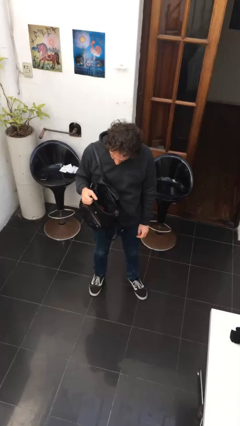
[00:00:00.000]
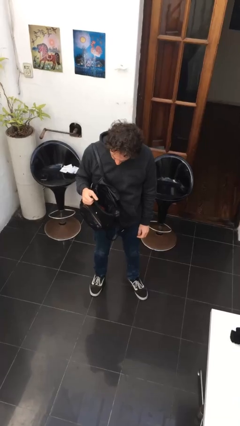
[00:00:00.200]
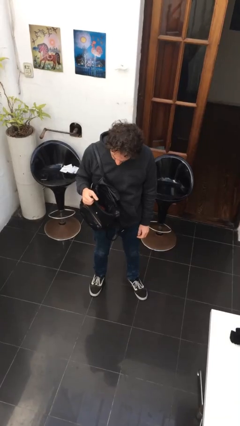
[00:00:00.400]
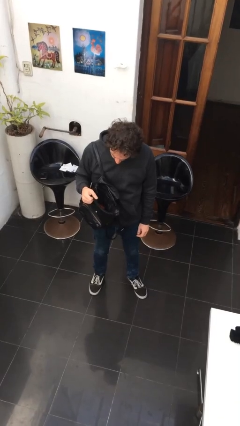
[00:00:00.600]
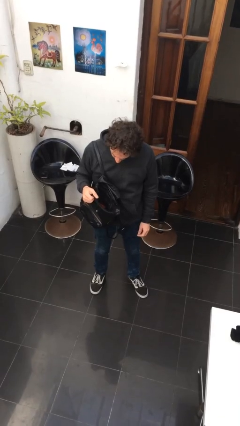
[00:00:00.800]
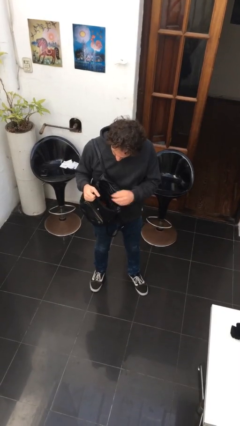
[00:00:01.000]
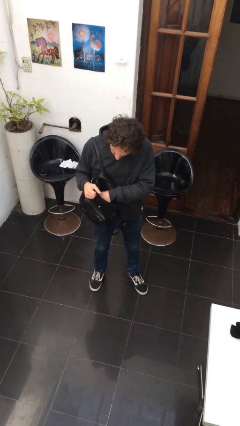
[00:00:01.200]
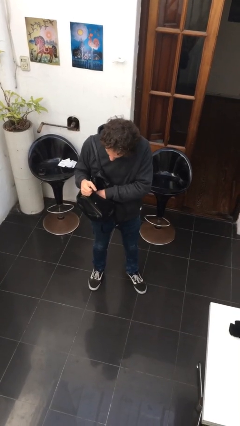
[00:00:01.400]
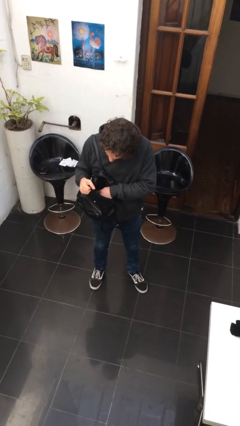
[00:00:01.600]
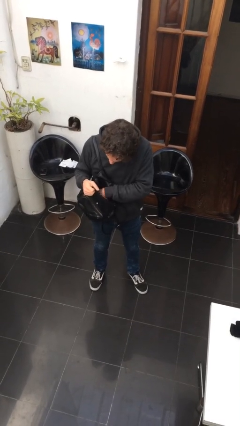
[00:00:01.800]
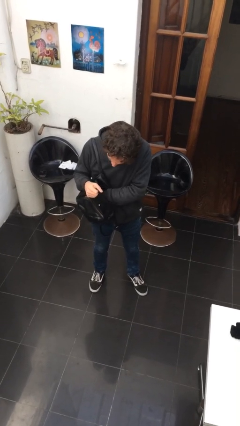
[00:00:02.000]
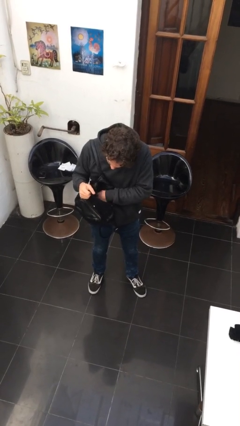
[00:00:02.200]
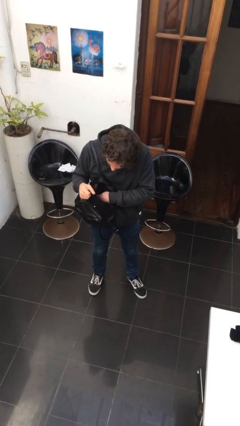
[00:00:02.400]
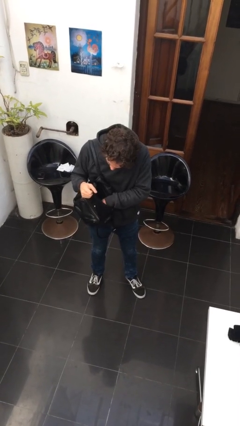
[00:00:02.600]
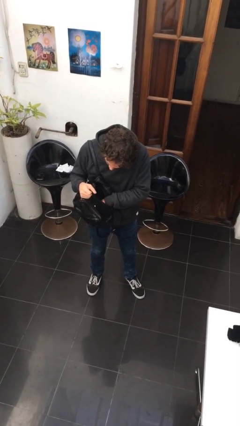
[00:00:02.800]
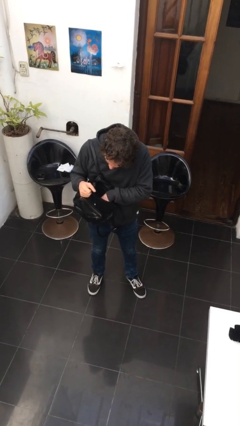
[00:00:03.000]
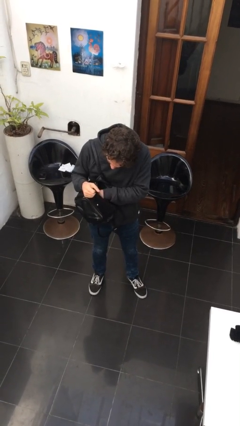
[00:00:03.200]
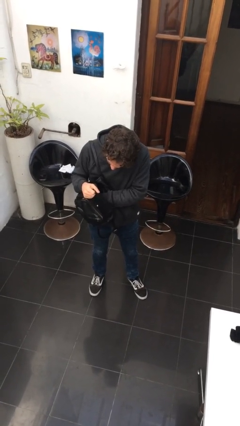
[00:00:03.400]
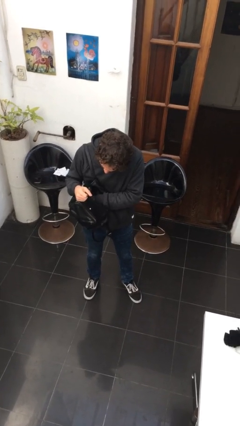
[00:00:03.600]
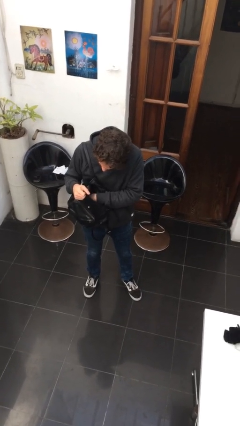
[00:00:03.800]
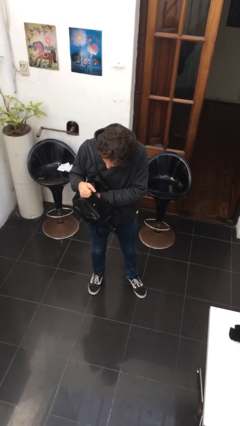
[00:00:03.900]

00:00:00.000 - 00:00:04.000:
person searches in purse

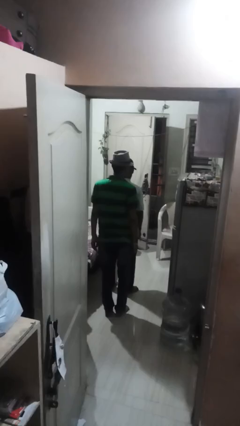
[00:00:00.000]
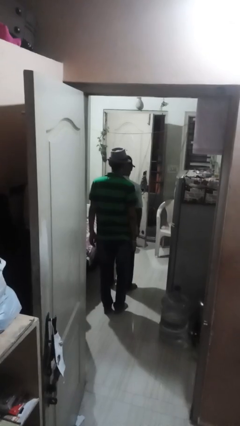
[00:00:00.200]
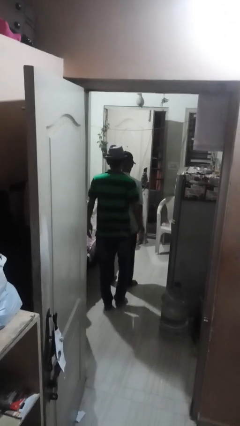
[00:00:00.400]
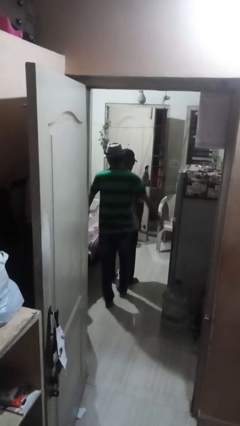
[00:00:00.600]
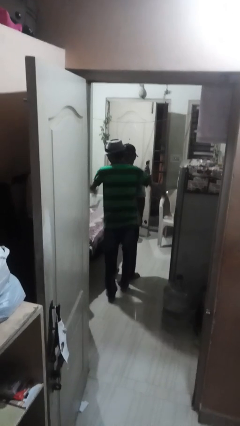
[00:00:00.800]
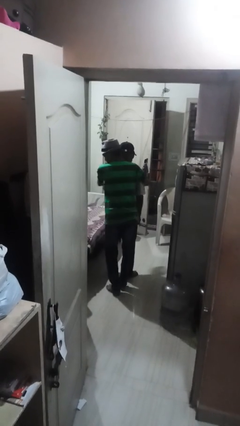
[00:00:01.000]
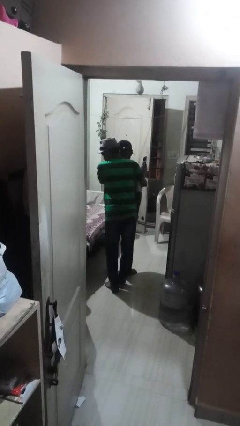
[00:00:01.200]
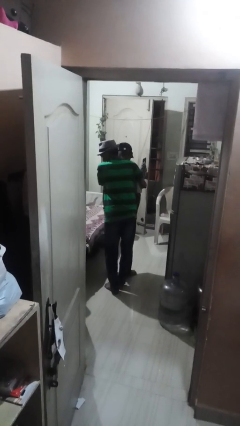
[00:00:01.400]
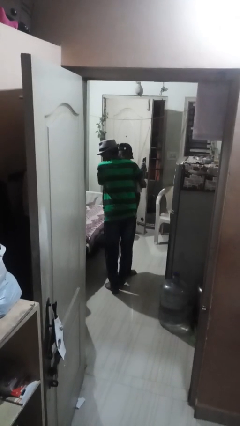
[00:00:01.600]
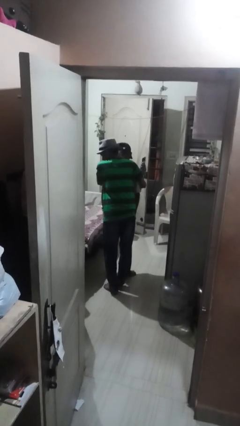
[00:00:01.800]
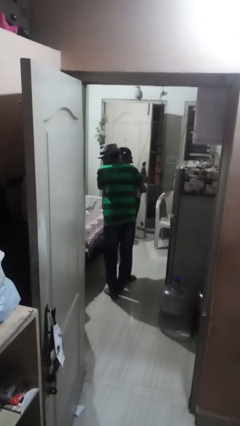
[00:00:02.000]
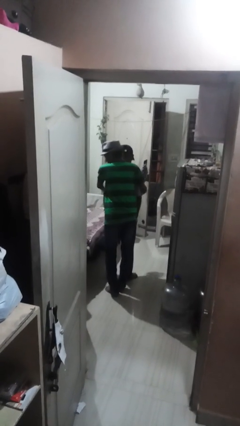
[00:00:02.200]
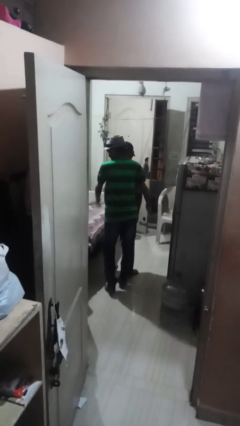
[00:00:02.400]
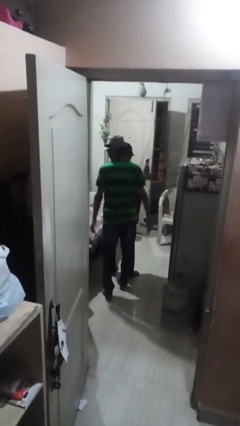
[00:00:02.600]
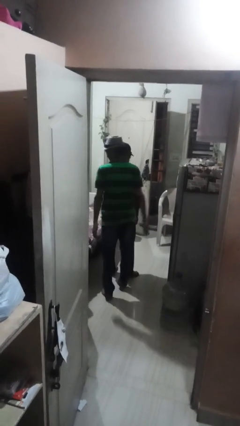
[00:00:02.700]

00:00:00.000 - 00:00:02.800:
person hugs person from behind

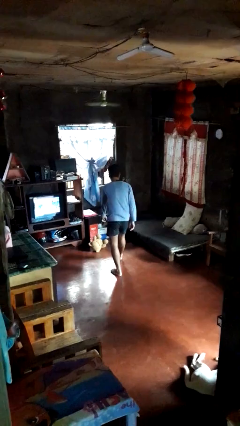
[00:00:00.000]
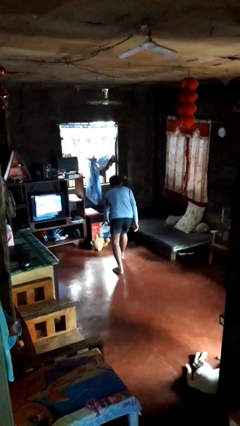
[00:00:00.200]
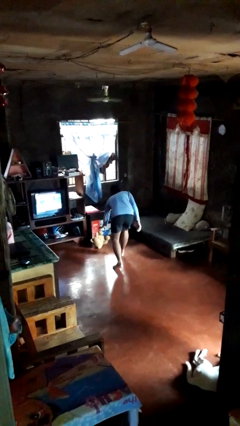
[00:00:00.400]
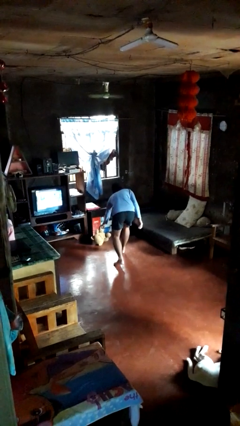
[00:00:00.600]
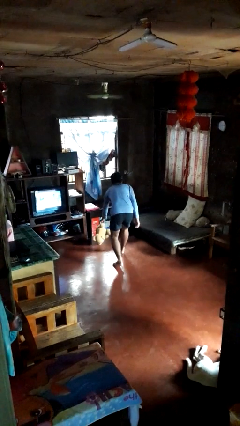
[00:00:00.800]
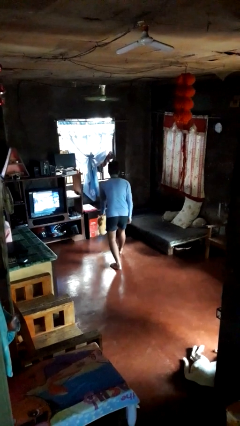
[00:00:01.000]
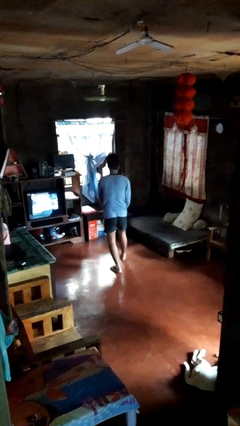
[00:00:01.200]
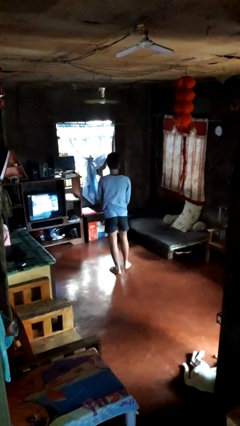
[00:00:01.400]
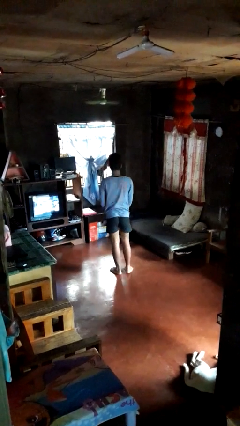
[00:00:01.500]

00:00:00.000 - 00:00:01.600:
person picks up object from floor

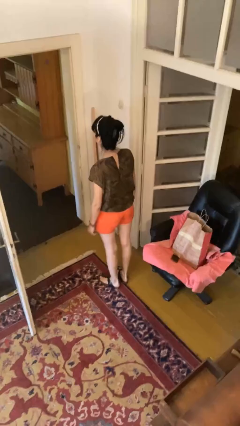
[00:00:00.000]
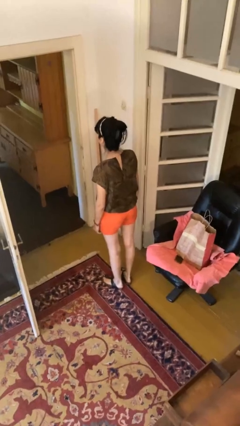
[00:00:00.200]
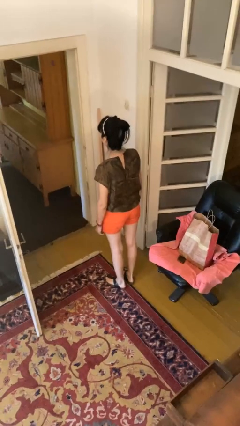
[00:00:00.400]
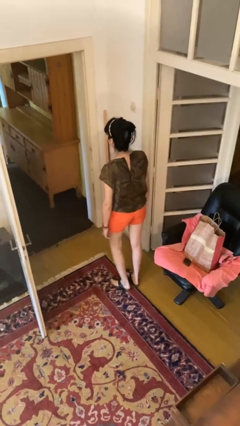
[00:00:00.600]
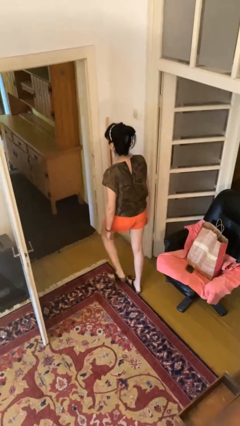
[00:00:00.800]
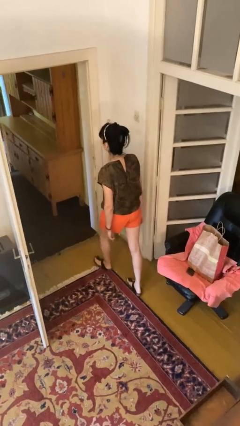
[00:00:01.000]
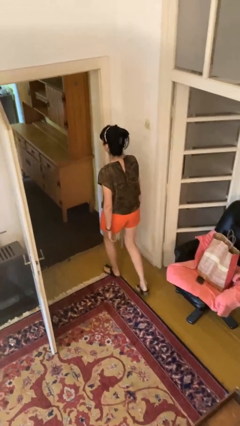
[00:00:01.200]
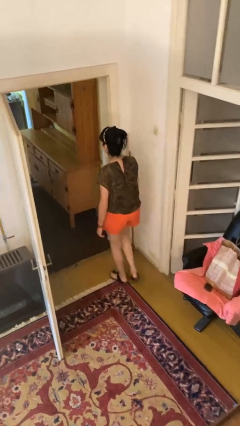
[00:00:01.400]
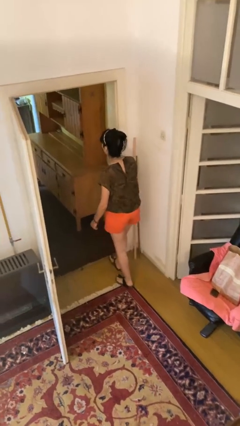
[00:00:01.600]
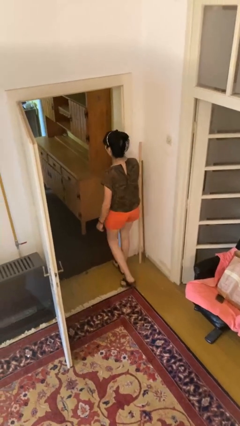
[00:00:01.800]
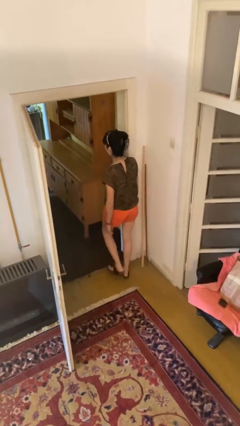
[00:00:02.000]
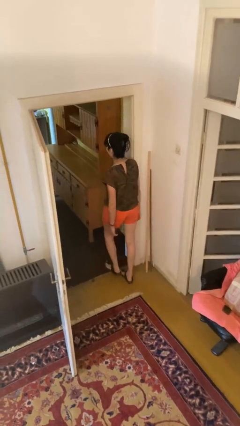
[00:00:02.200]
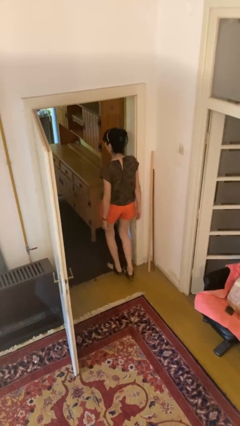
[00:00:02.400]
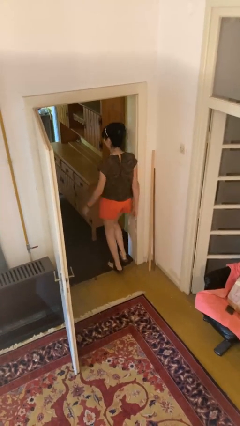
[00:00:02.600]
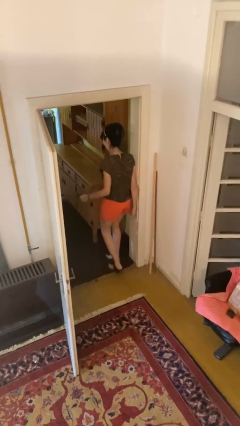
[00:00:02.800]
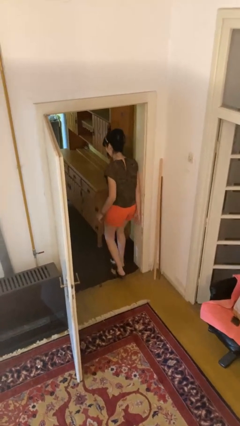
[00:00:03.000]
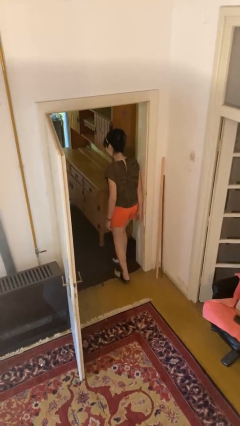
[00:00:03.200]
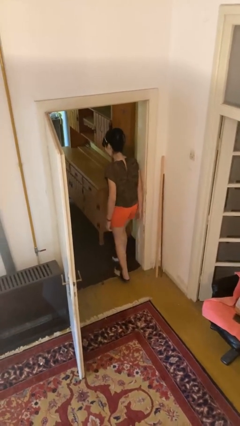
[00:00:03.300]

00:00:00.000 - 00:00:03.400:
person bumps into wall

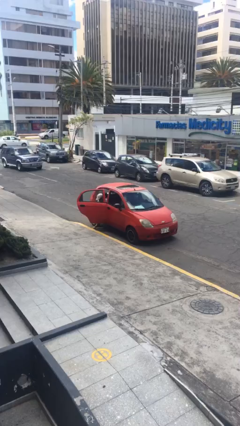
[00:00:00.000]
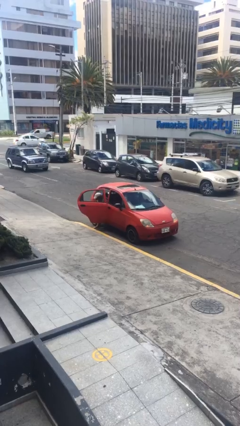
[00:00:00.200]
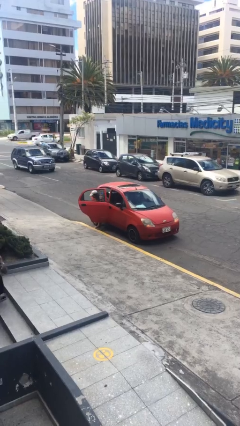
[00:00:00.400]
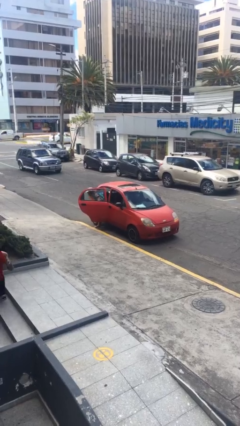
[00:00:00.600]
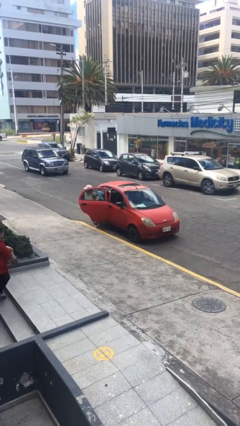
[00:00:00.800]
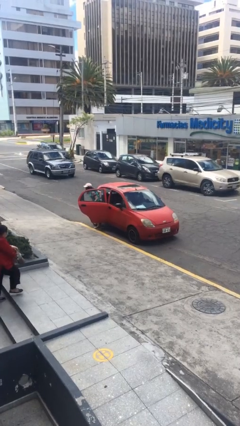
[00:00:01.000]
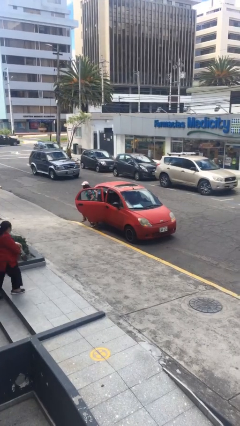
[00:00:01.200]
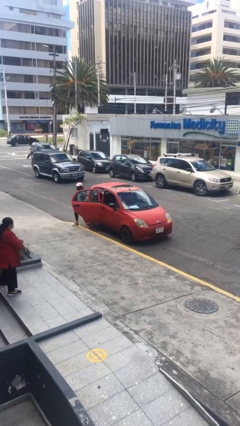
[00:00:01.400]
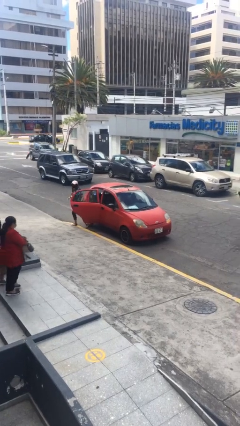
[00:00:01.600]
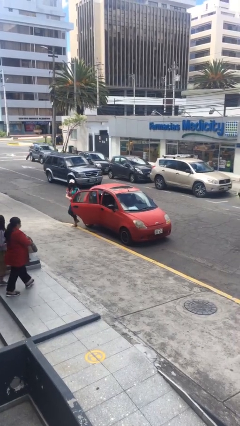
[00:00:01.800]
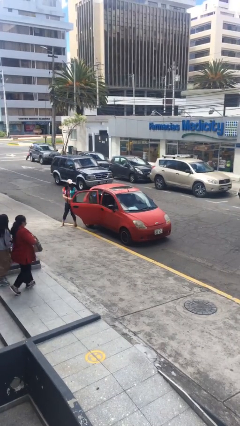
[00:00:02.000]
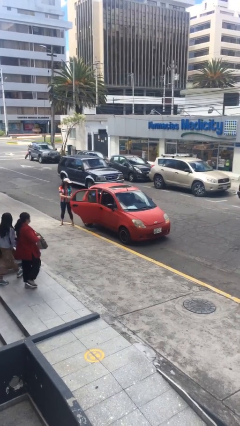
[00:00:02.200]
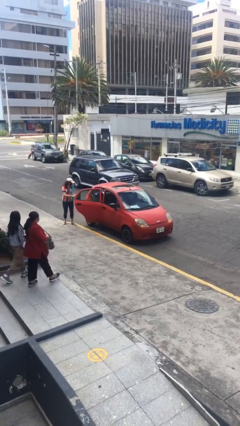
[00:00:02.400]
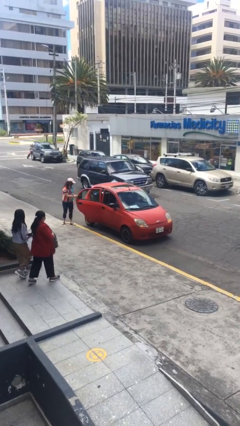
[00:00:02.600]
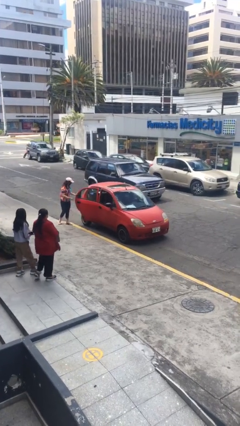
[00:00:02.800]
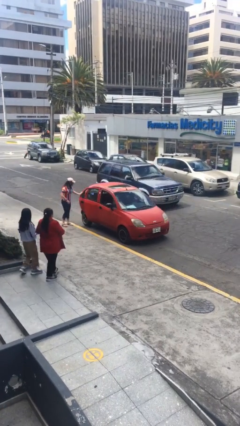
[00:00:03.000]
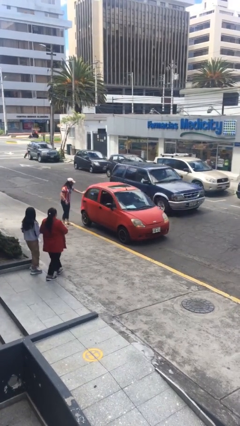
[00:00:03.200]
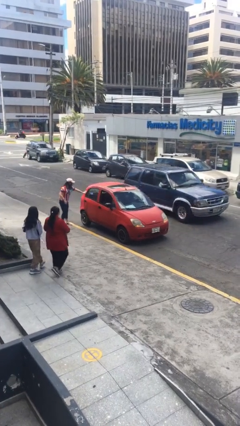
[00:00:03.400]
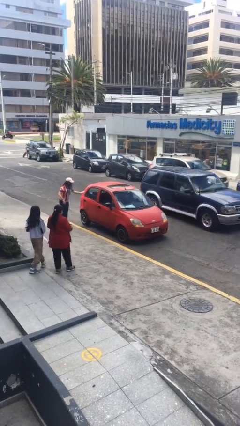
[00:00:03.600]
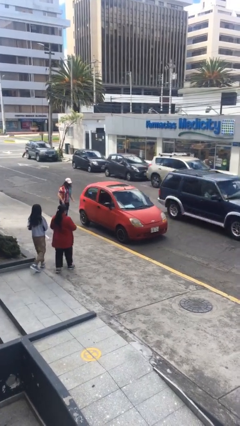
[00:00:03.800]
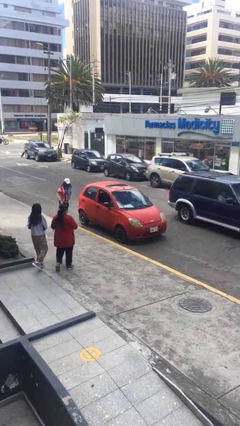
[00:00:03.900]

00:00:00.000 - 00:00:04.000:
car drops off person

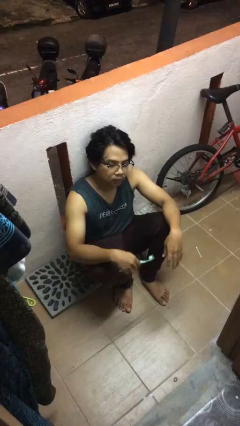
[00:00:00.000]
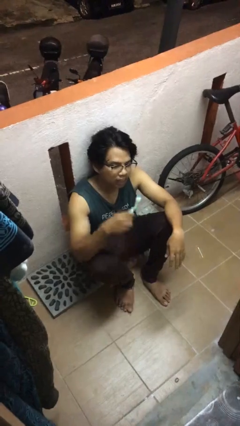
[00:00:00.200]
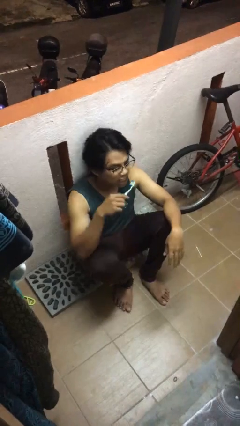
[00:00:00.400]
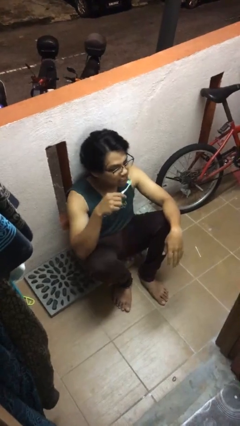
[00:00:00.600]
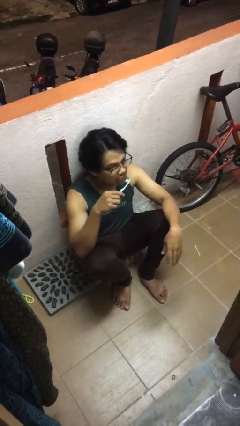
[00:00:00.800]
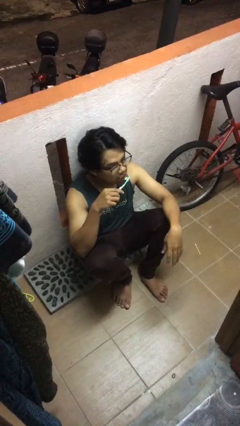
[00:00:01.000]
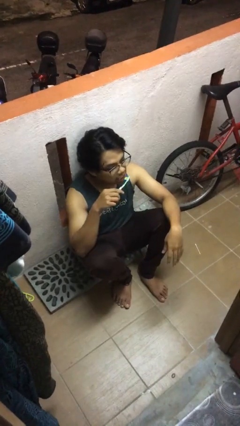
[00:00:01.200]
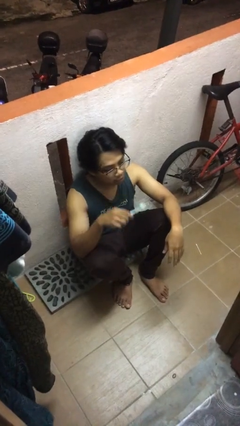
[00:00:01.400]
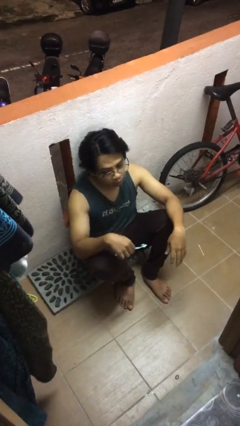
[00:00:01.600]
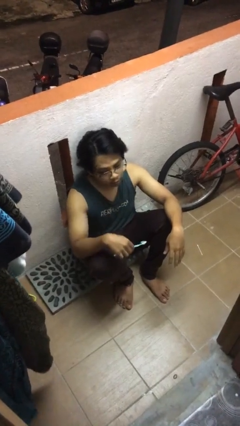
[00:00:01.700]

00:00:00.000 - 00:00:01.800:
person brushes teeth
